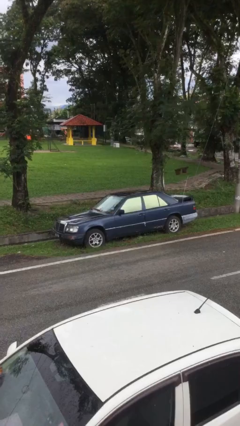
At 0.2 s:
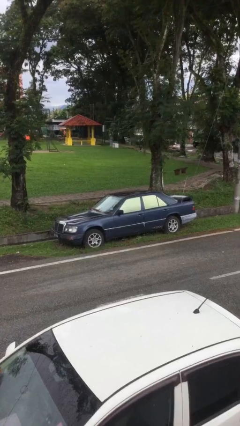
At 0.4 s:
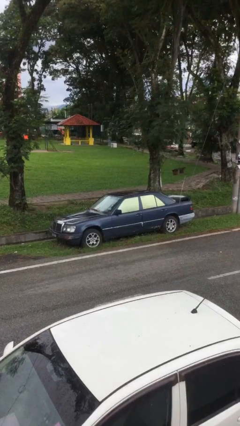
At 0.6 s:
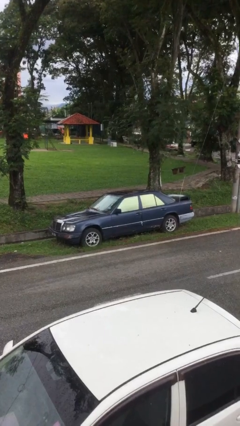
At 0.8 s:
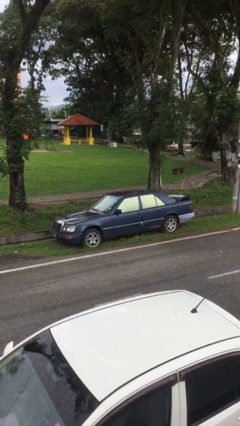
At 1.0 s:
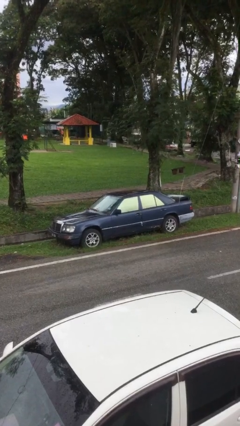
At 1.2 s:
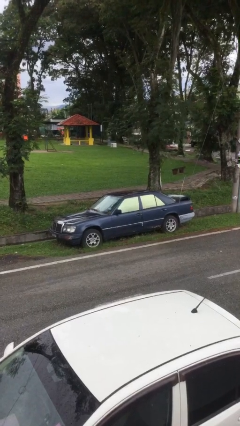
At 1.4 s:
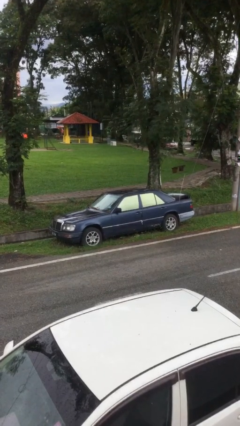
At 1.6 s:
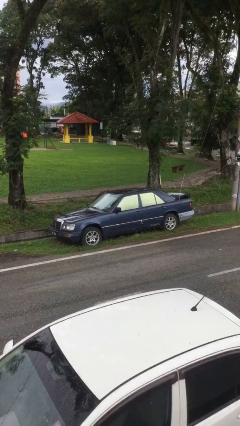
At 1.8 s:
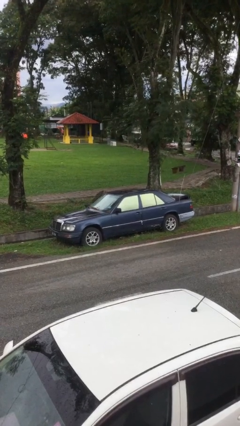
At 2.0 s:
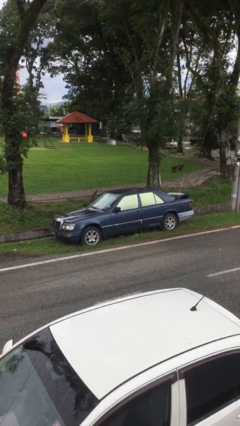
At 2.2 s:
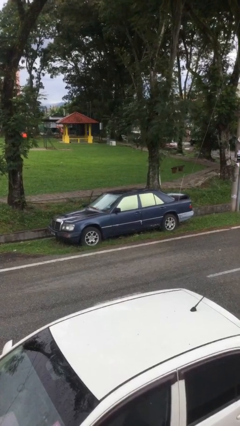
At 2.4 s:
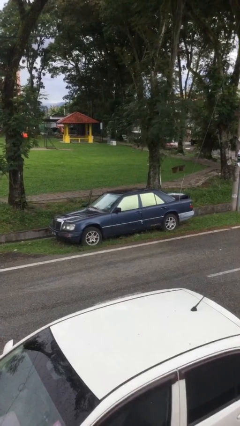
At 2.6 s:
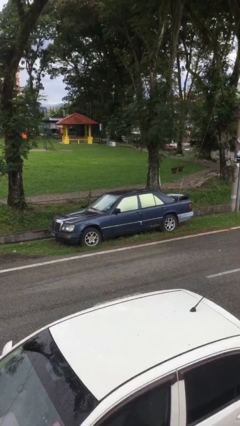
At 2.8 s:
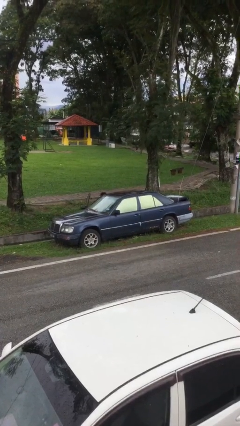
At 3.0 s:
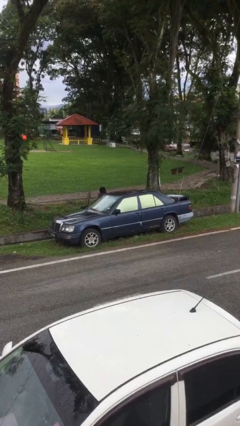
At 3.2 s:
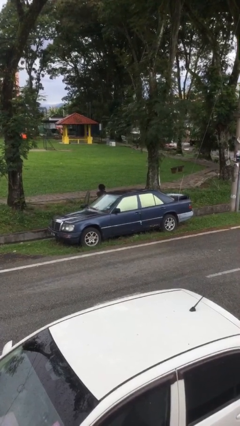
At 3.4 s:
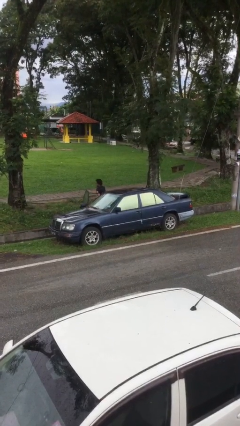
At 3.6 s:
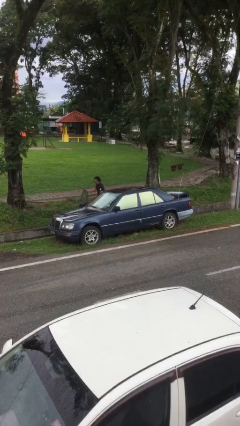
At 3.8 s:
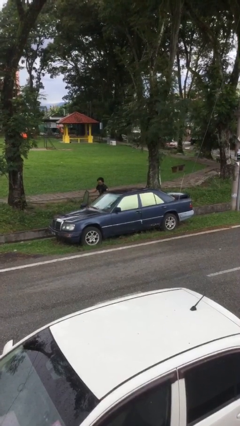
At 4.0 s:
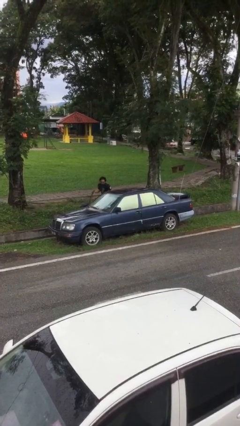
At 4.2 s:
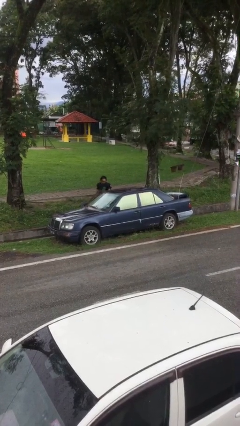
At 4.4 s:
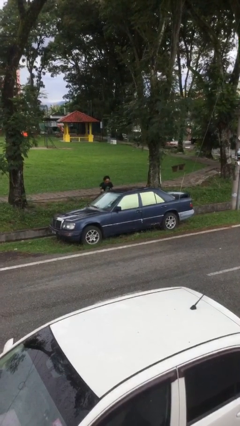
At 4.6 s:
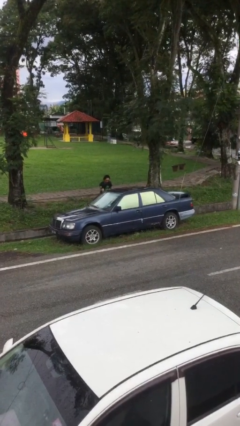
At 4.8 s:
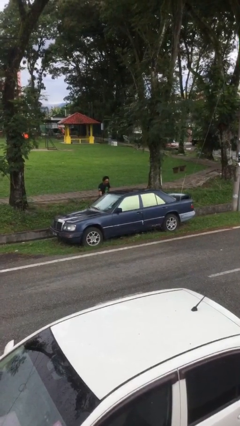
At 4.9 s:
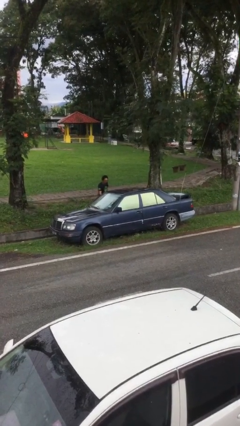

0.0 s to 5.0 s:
car drops off person

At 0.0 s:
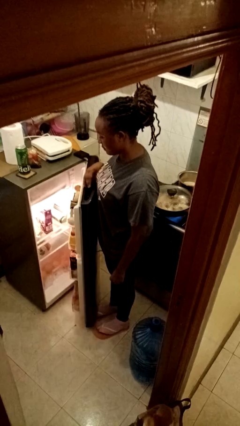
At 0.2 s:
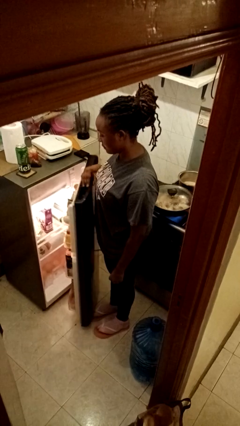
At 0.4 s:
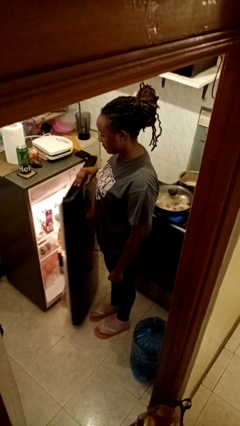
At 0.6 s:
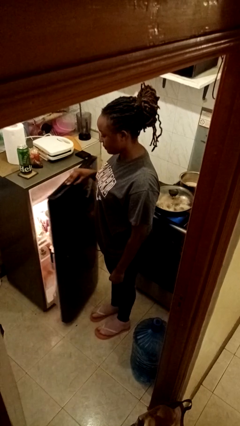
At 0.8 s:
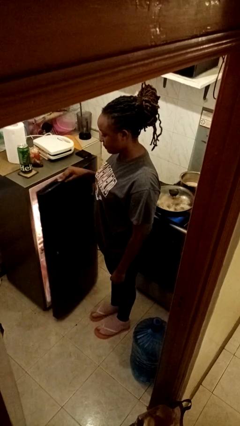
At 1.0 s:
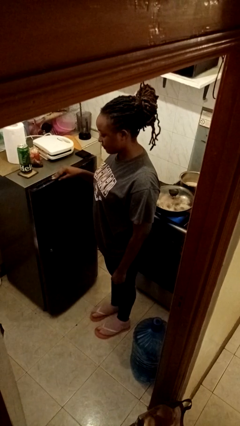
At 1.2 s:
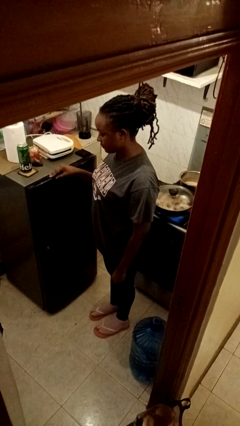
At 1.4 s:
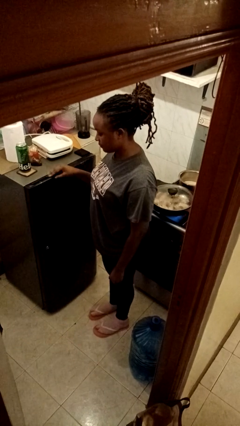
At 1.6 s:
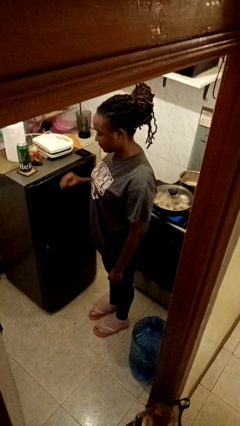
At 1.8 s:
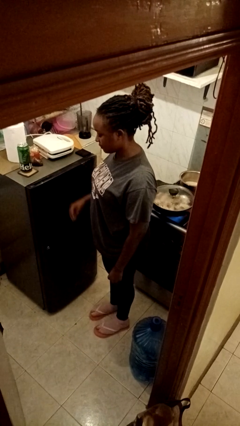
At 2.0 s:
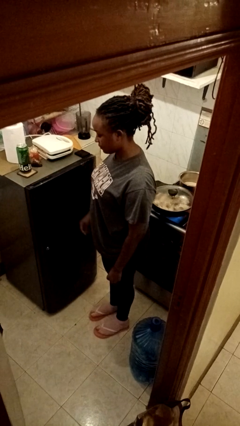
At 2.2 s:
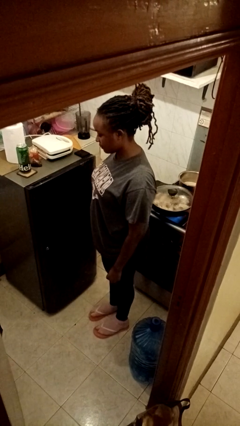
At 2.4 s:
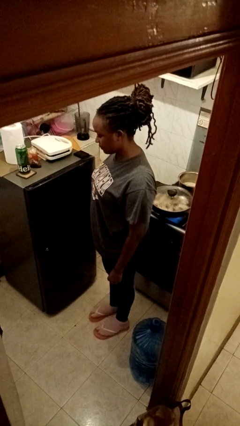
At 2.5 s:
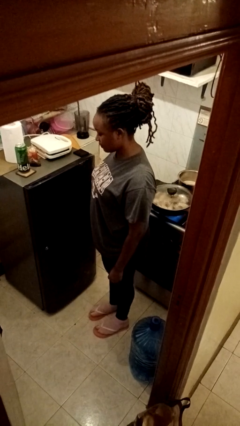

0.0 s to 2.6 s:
person closes refrigerator

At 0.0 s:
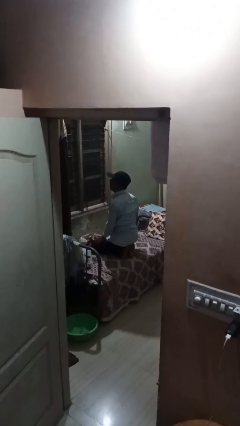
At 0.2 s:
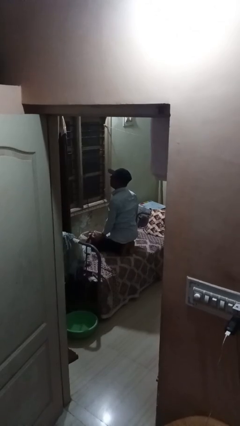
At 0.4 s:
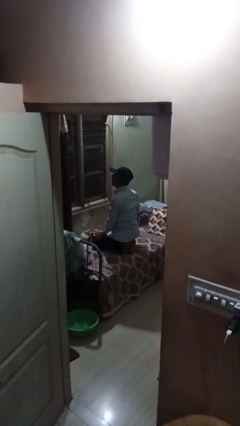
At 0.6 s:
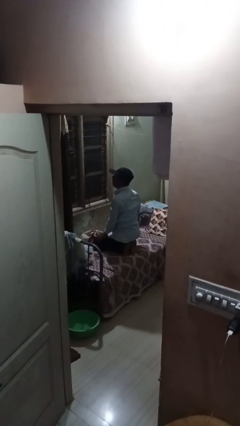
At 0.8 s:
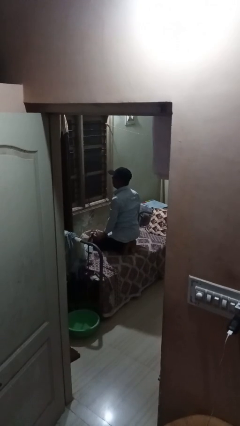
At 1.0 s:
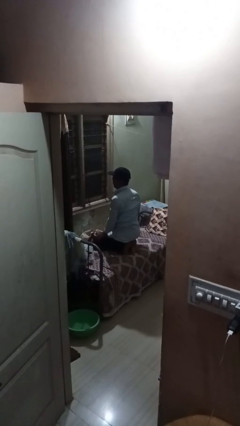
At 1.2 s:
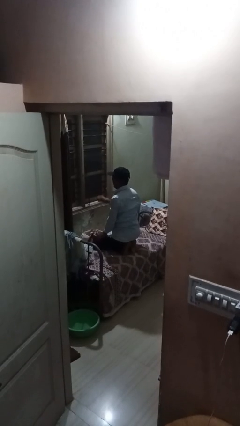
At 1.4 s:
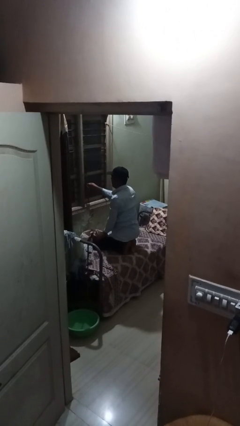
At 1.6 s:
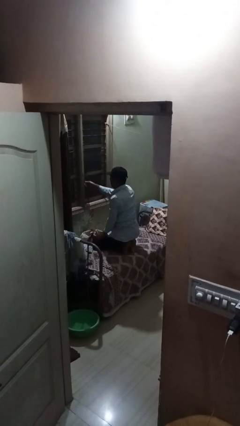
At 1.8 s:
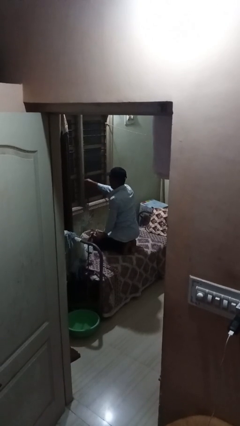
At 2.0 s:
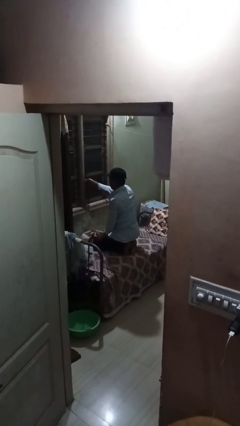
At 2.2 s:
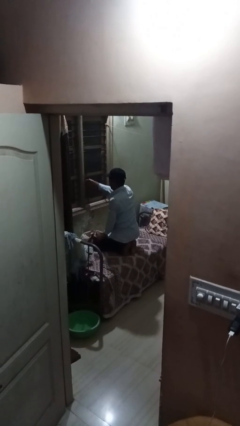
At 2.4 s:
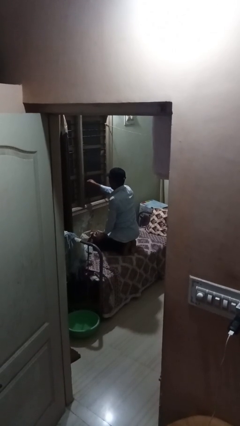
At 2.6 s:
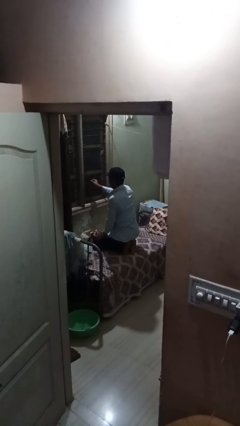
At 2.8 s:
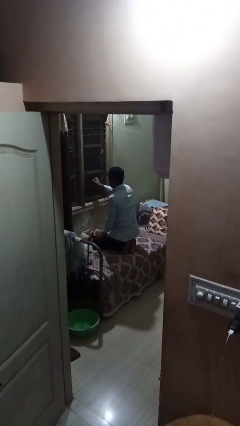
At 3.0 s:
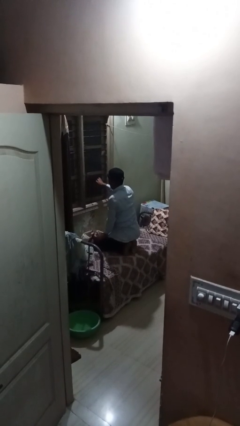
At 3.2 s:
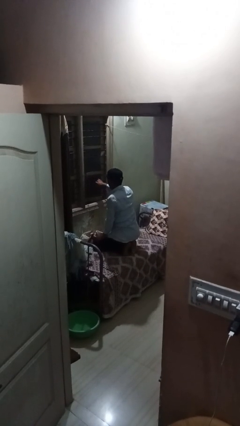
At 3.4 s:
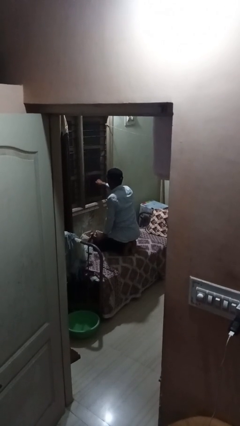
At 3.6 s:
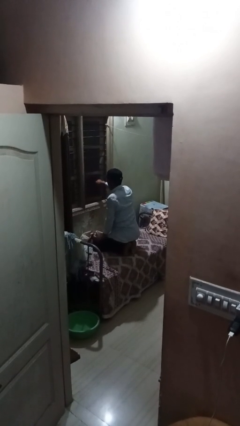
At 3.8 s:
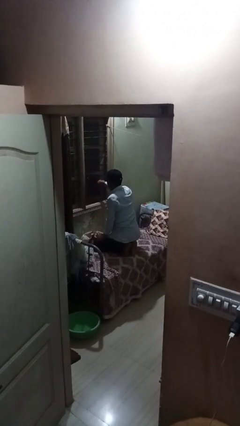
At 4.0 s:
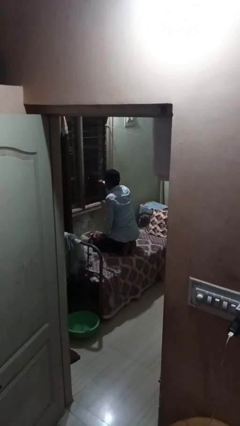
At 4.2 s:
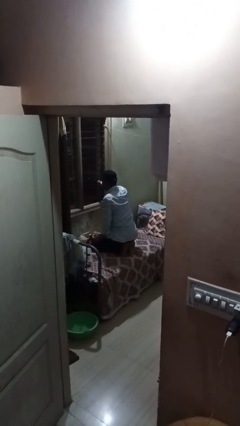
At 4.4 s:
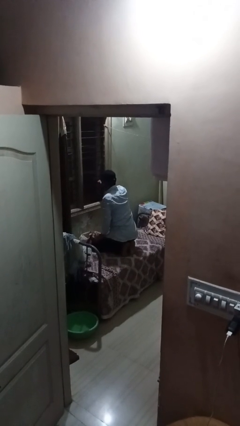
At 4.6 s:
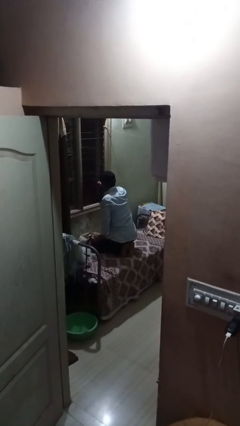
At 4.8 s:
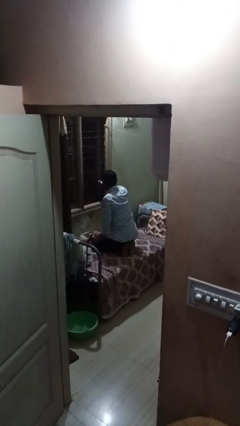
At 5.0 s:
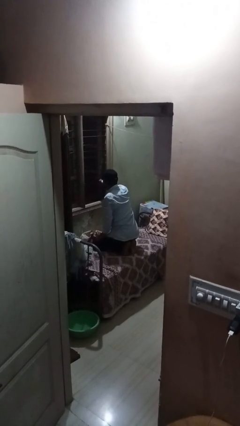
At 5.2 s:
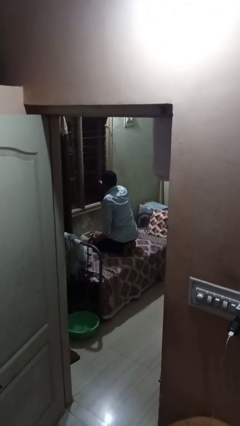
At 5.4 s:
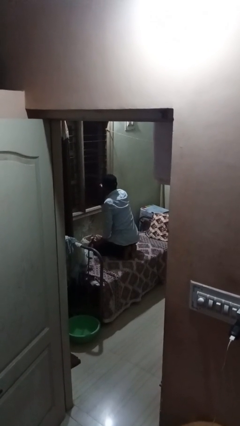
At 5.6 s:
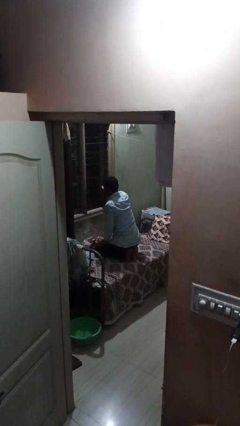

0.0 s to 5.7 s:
person opens home window

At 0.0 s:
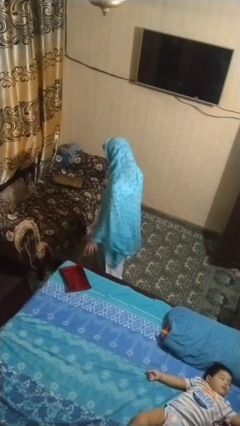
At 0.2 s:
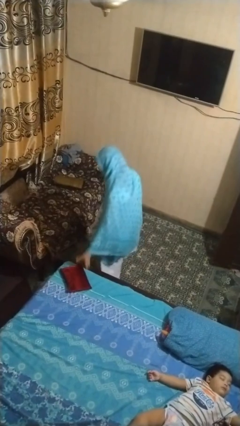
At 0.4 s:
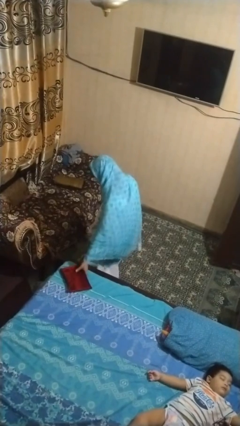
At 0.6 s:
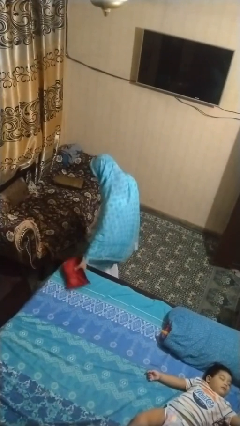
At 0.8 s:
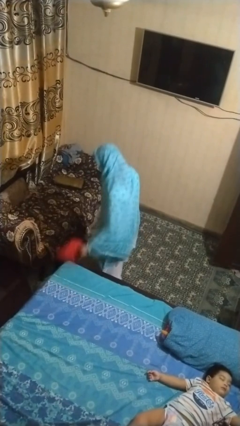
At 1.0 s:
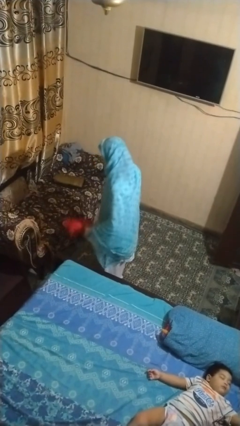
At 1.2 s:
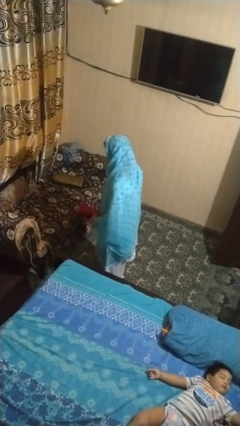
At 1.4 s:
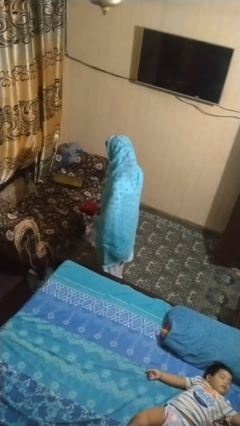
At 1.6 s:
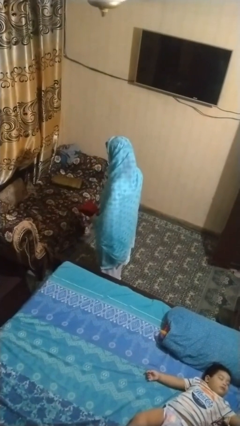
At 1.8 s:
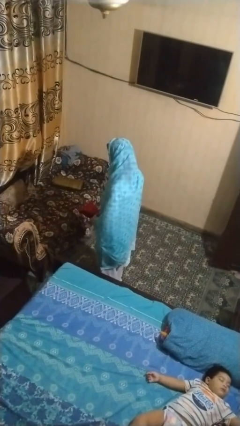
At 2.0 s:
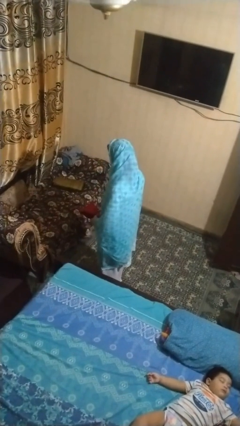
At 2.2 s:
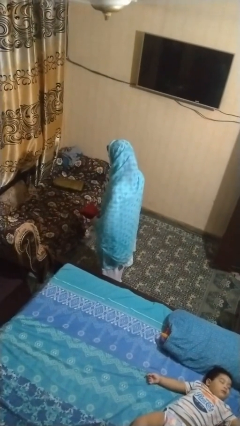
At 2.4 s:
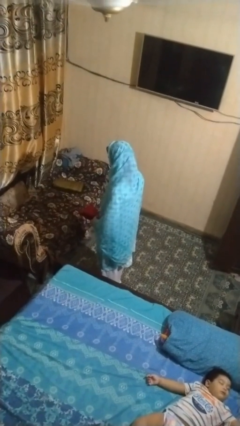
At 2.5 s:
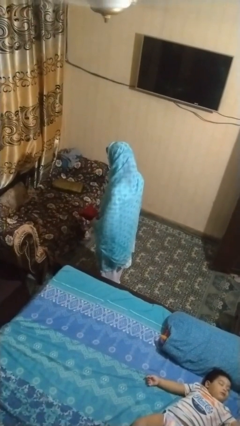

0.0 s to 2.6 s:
person picks up object from bed

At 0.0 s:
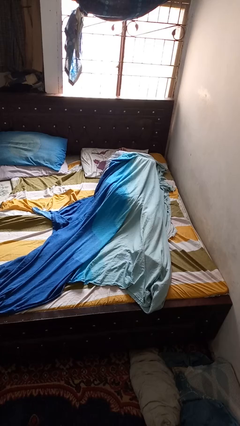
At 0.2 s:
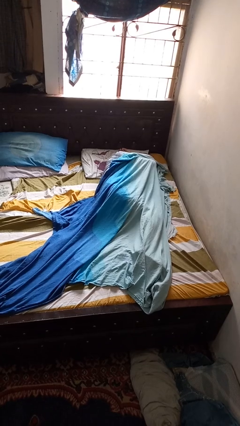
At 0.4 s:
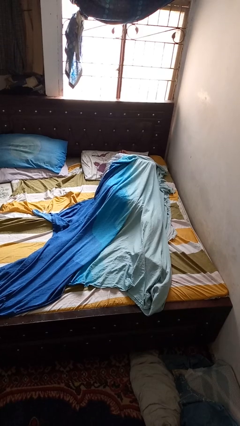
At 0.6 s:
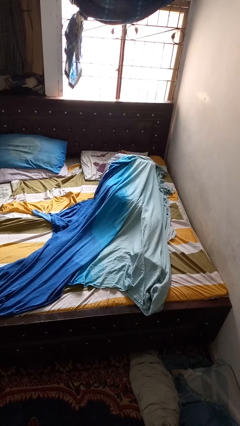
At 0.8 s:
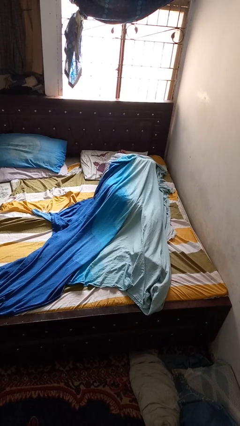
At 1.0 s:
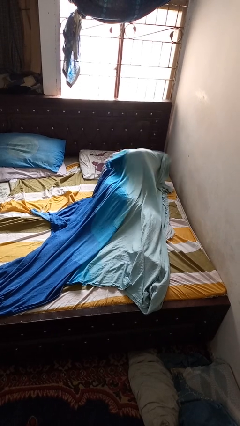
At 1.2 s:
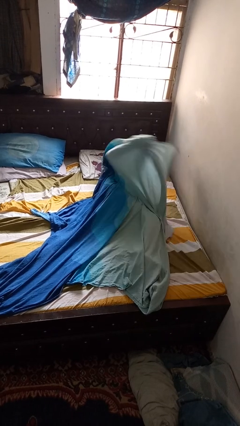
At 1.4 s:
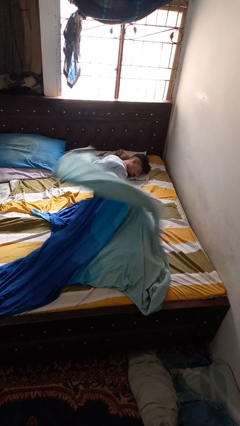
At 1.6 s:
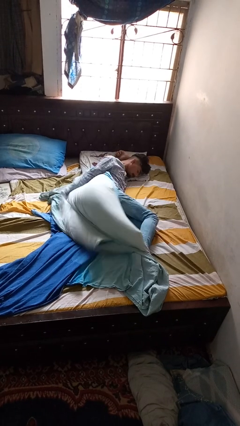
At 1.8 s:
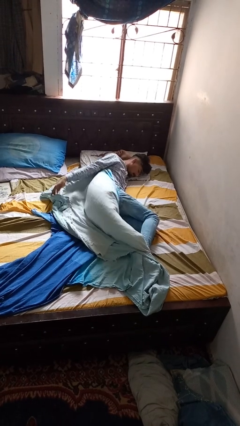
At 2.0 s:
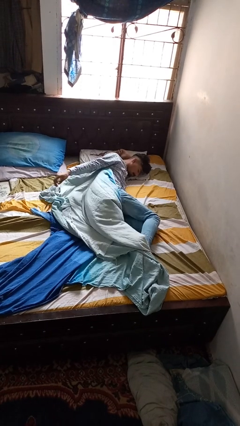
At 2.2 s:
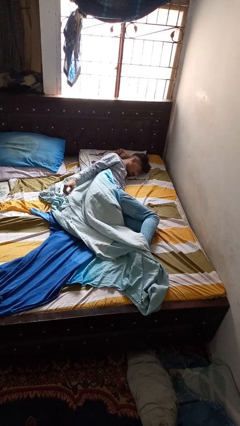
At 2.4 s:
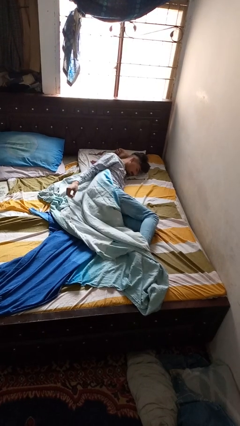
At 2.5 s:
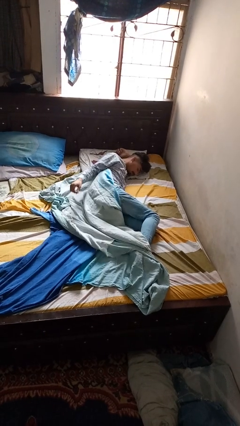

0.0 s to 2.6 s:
person uncovers with blanket
